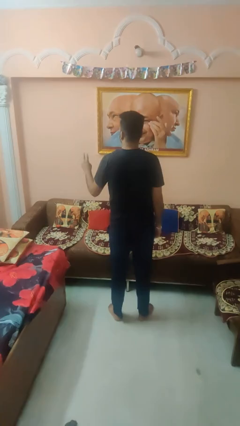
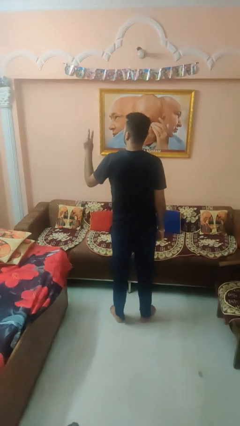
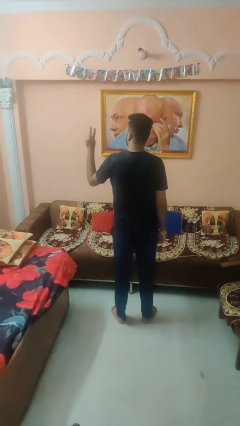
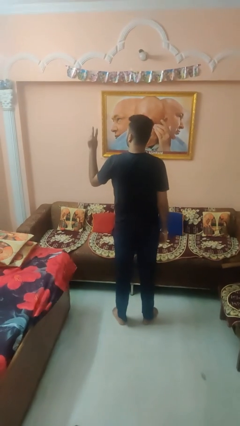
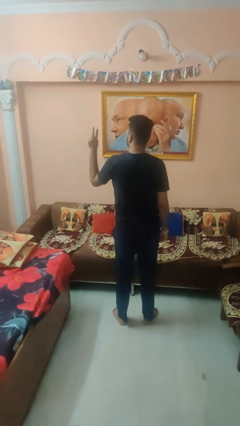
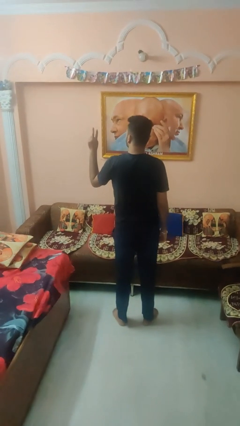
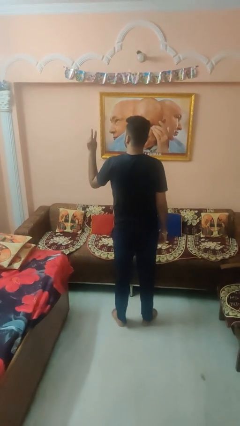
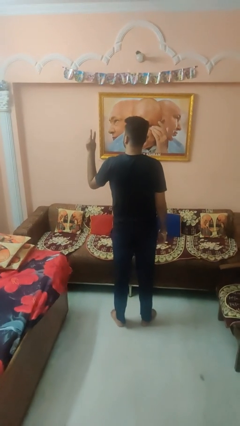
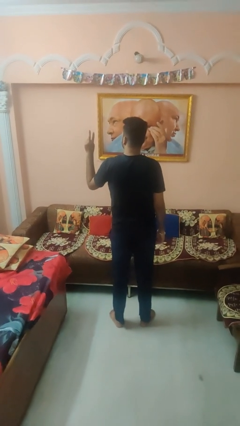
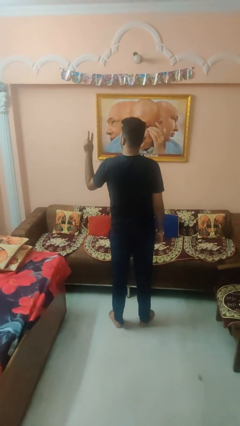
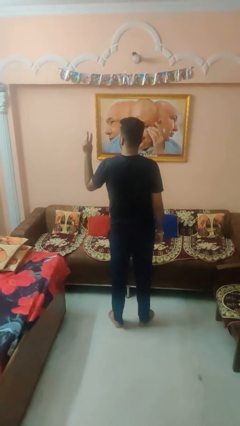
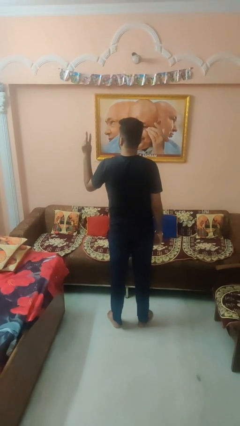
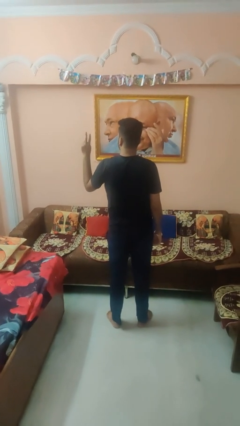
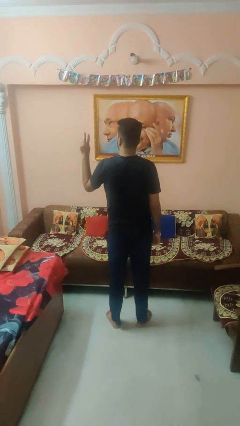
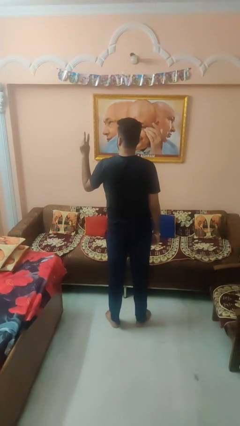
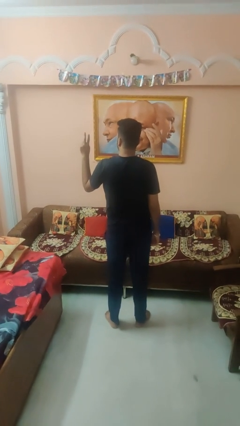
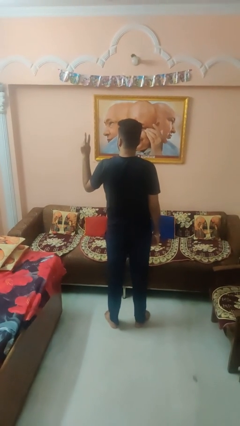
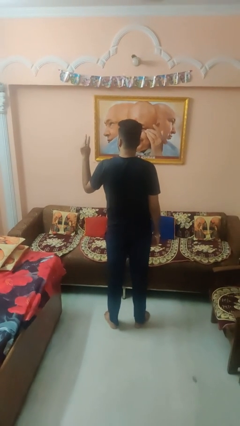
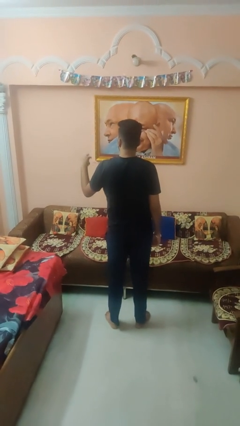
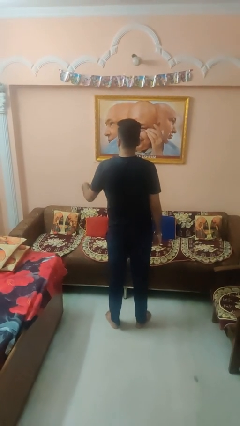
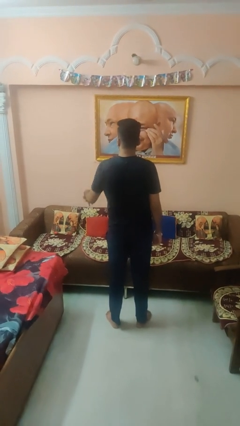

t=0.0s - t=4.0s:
person gestures peace

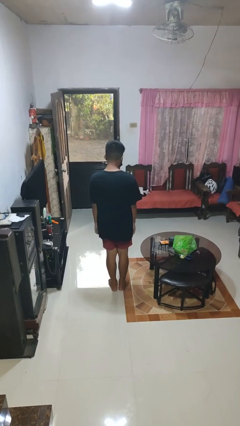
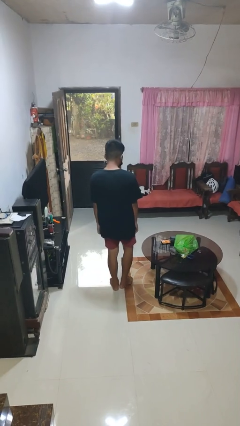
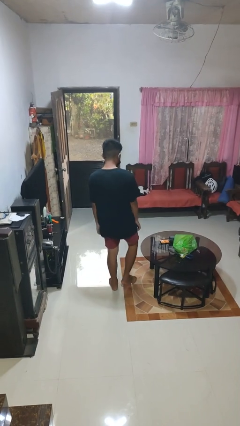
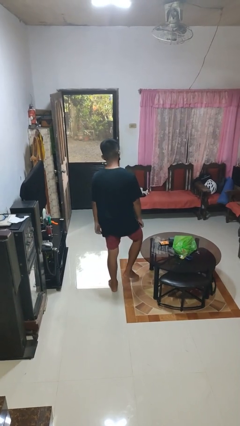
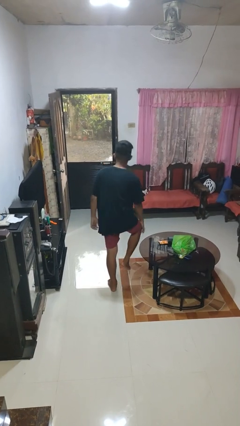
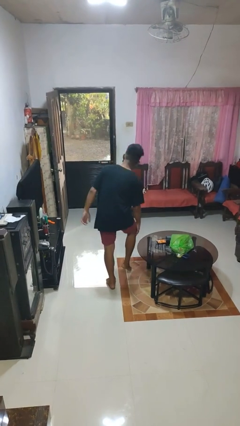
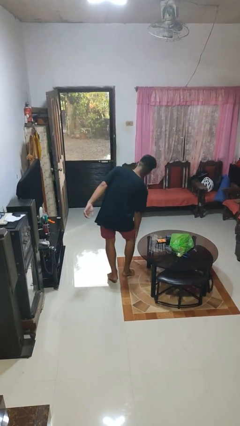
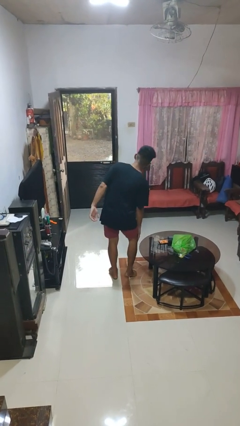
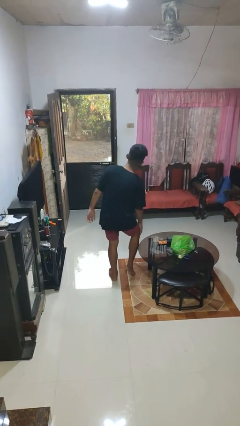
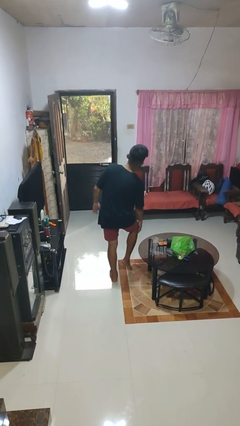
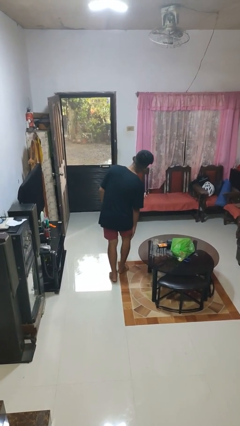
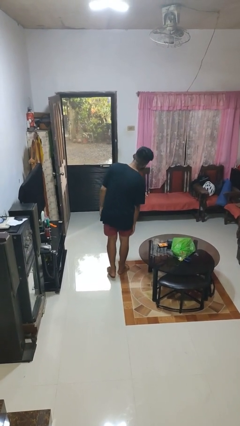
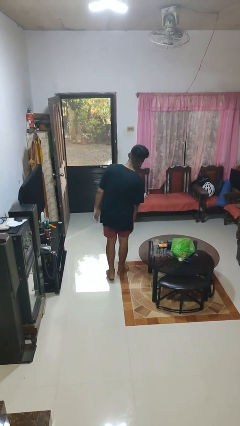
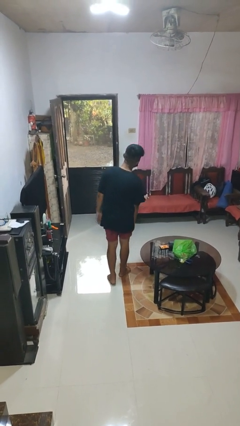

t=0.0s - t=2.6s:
person bumps into table

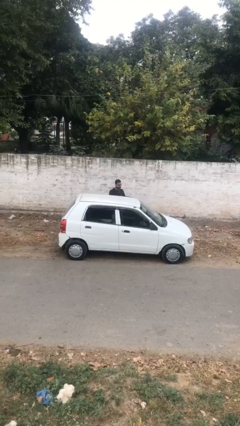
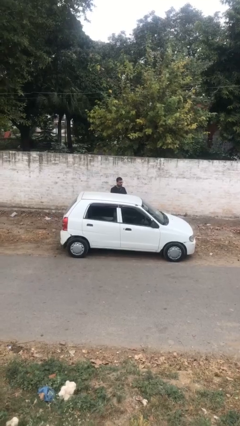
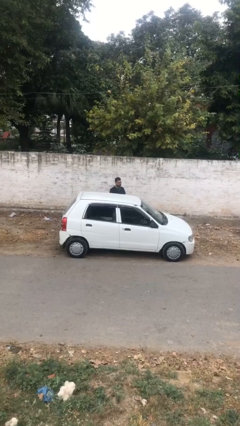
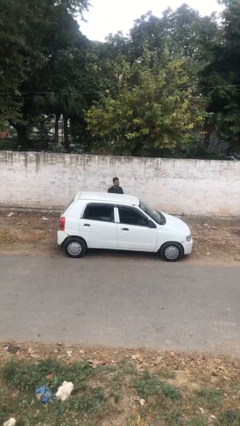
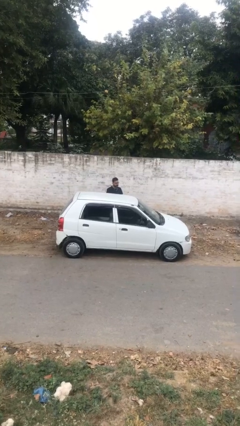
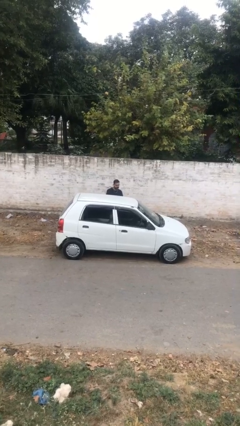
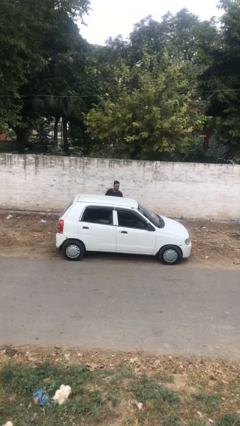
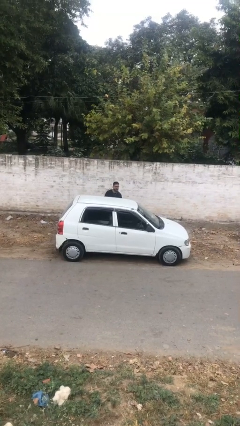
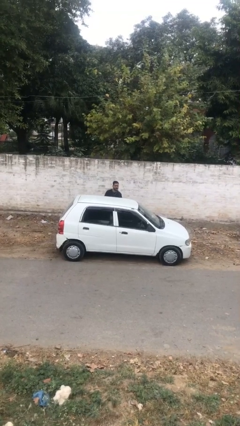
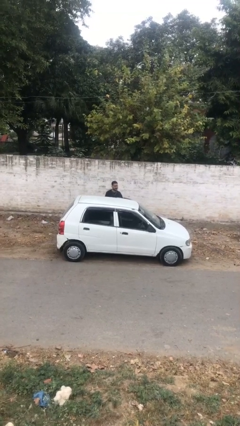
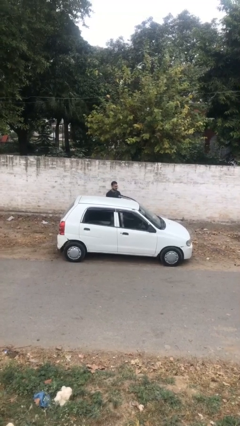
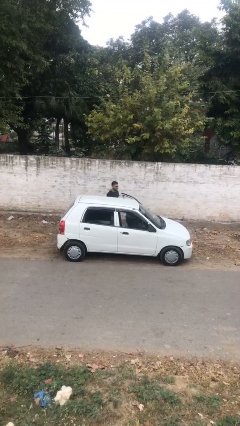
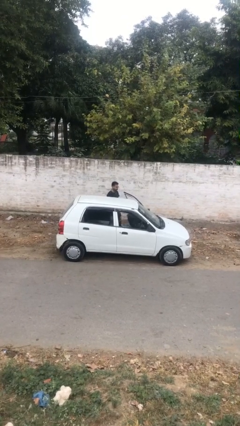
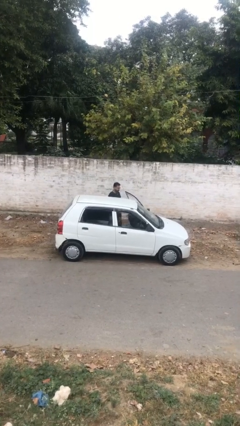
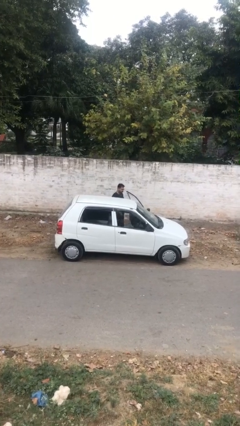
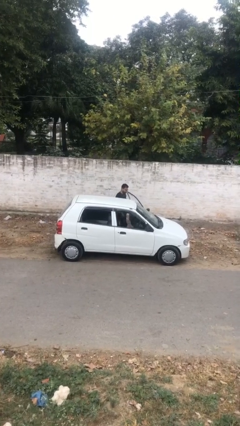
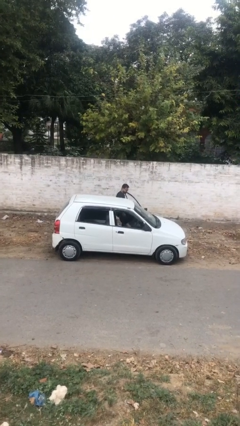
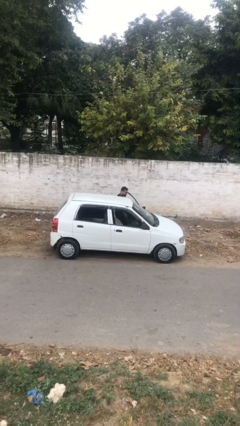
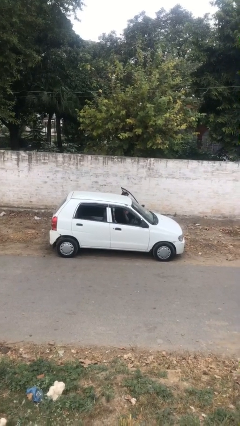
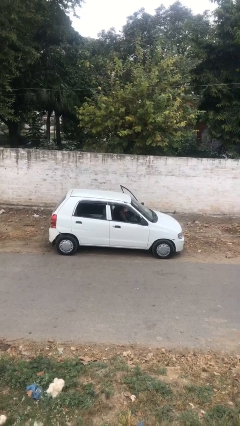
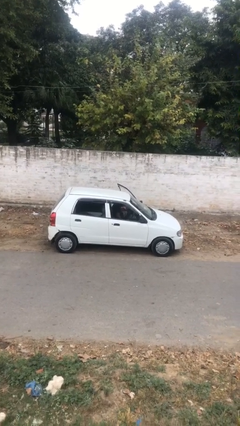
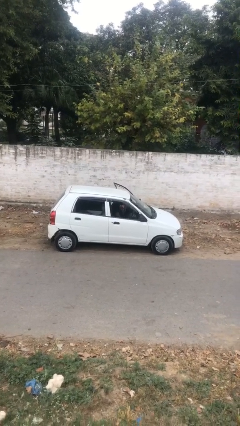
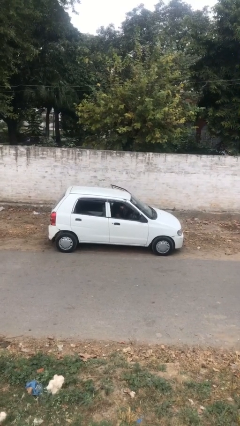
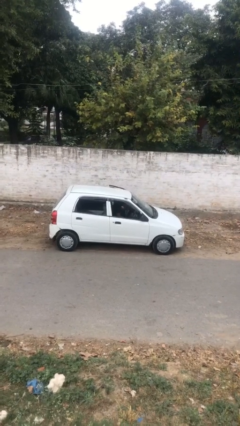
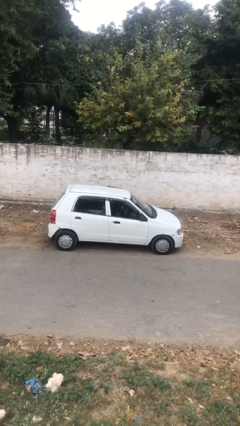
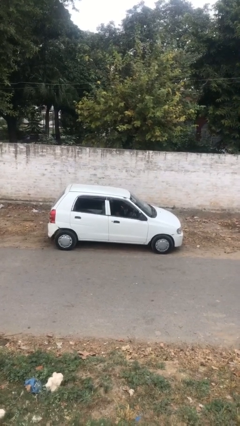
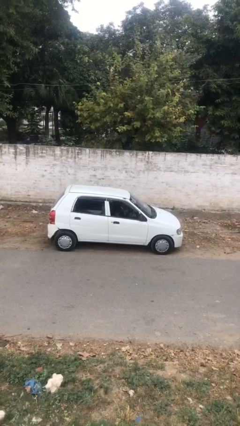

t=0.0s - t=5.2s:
person enters car

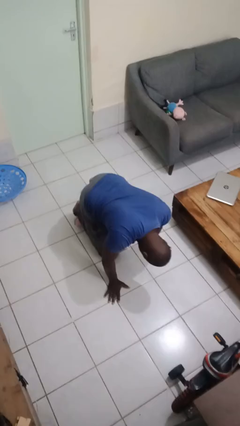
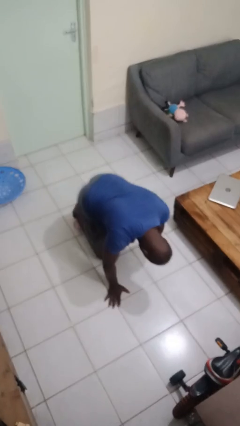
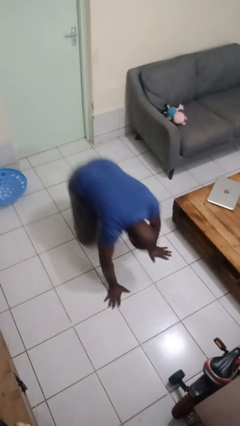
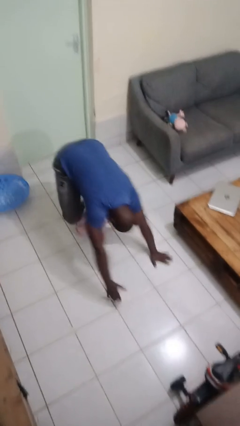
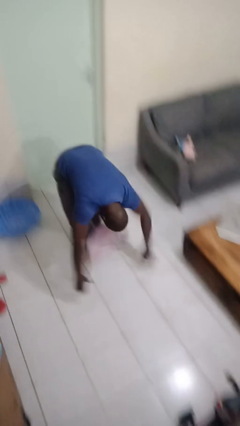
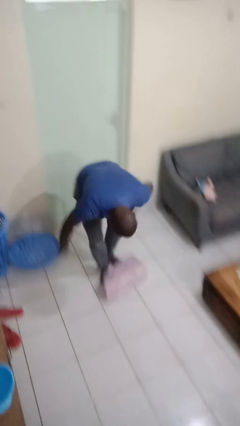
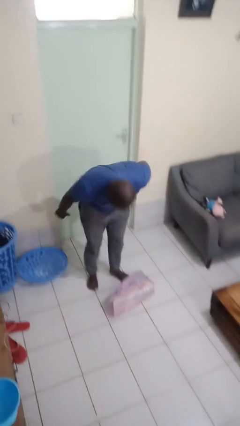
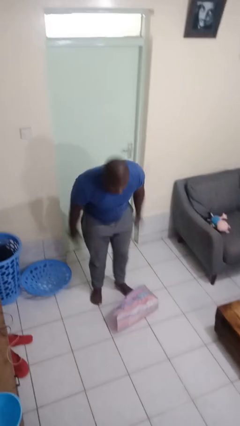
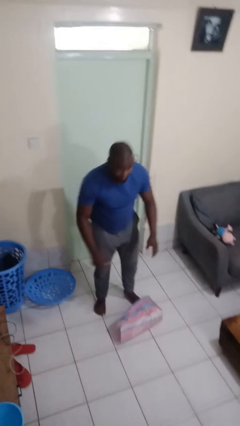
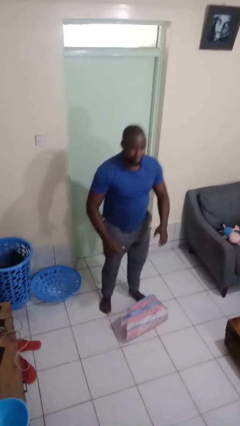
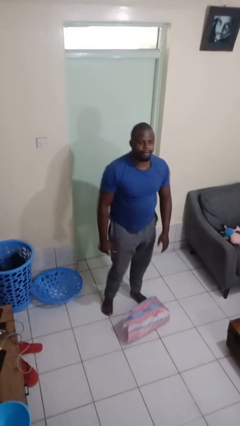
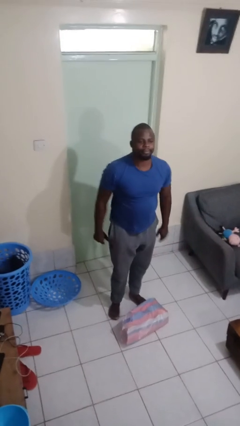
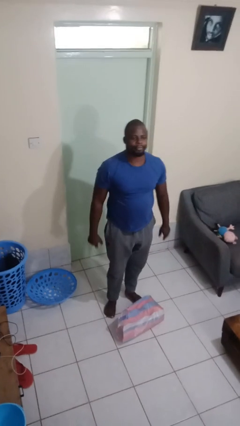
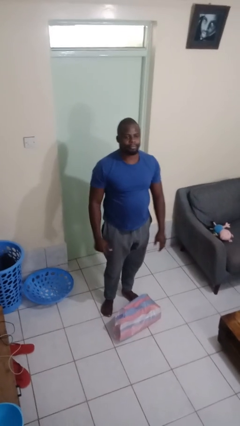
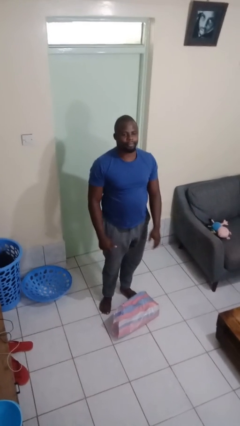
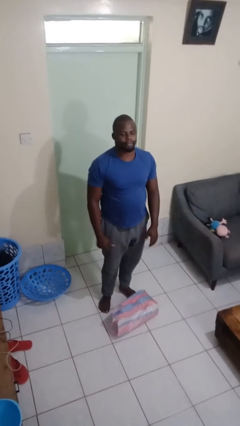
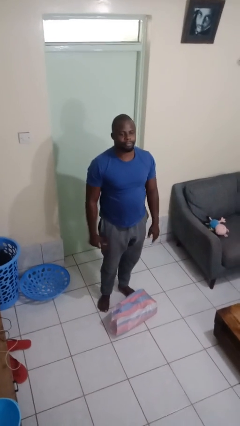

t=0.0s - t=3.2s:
person stands up from floor

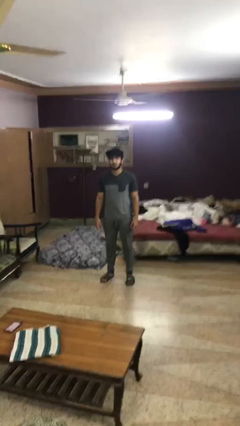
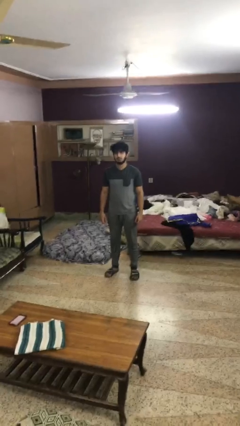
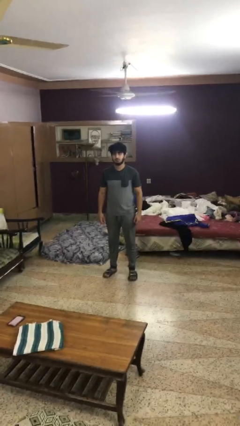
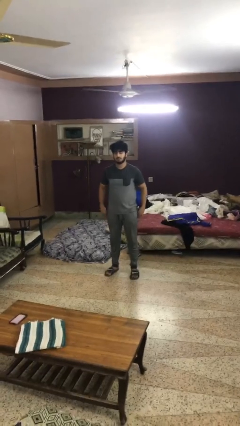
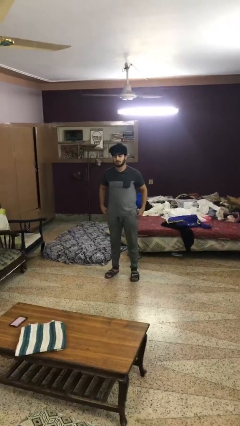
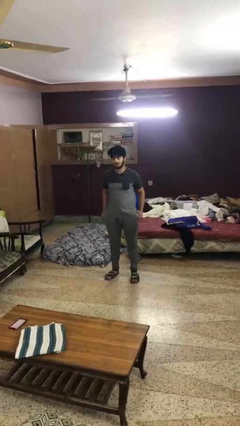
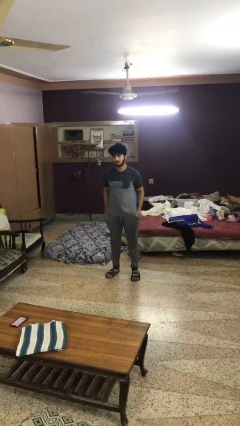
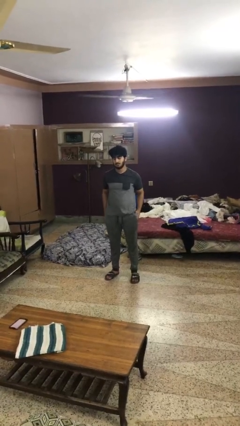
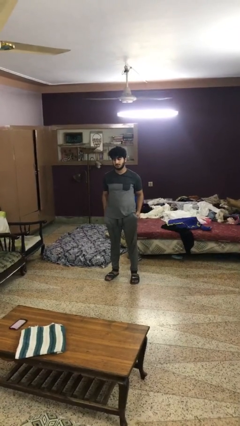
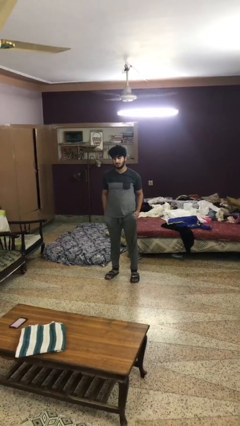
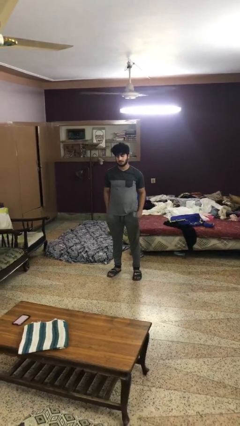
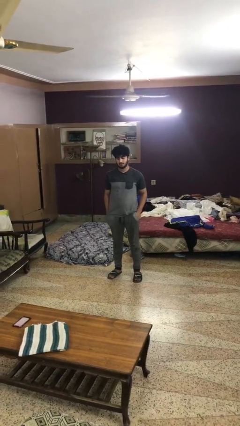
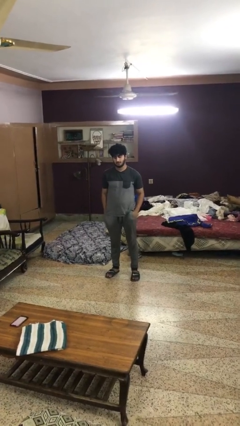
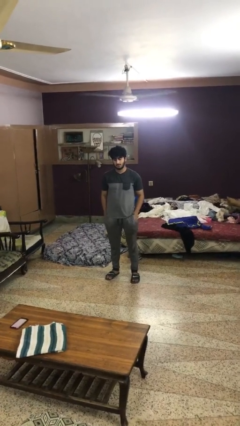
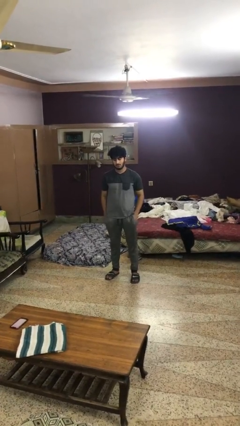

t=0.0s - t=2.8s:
person puts hands in back pockets
